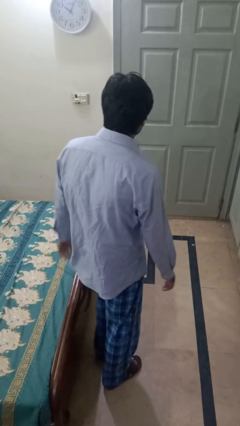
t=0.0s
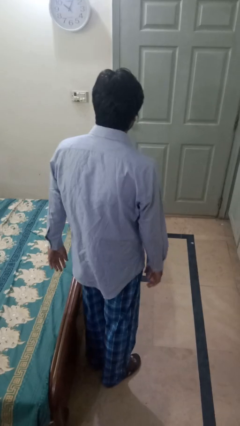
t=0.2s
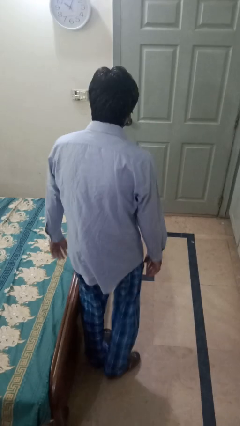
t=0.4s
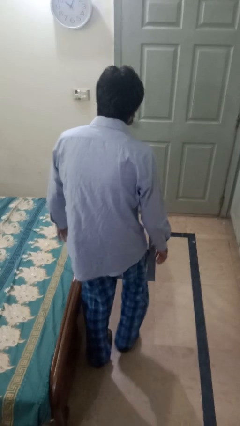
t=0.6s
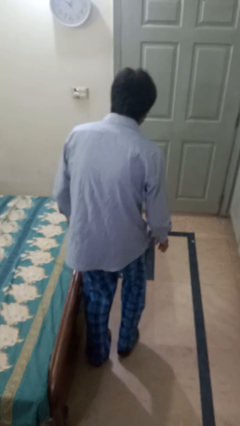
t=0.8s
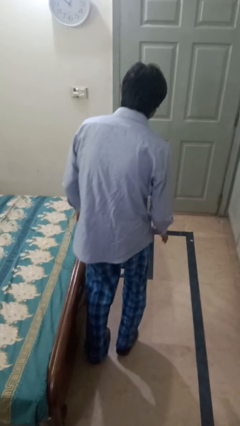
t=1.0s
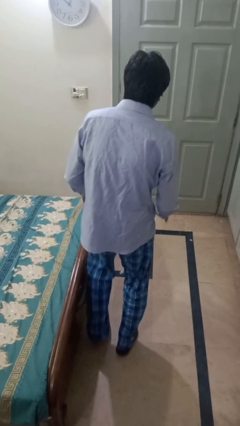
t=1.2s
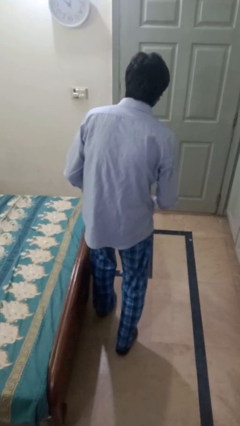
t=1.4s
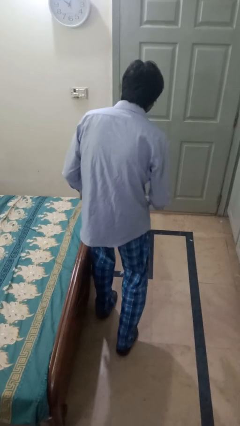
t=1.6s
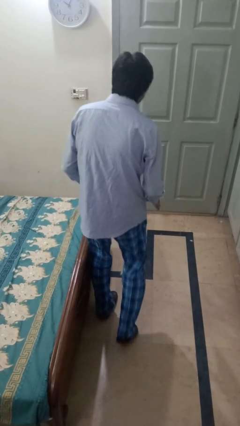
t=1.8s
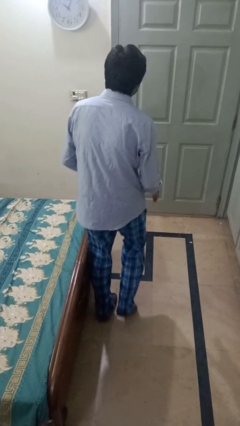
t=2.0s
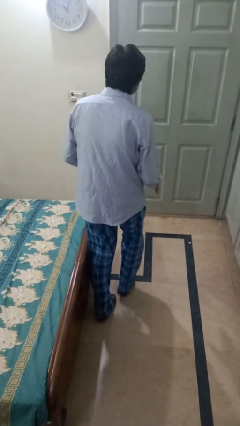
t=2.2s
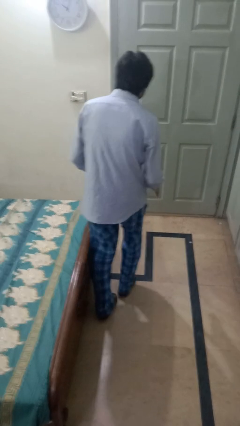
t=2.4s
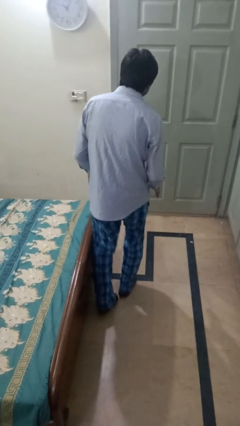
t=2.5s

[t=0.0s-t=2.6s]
person walks tiptoe

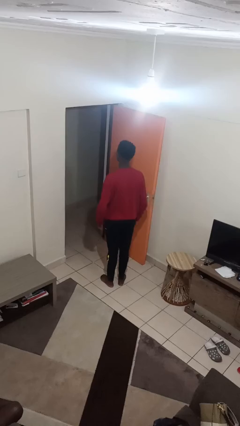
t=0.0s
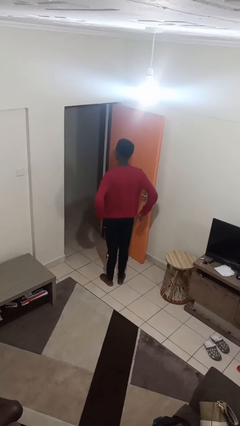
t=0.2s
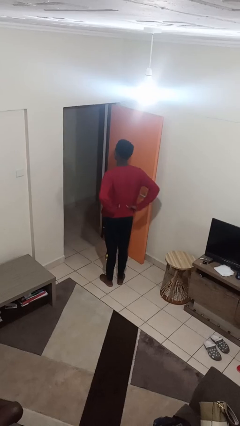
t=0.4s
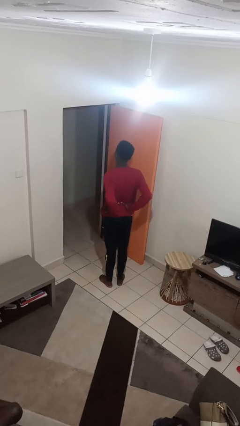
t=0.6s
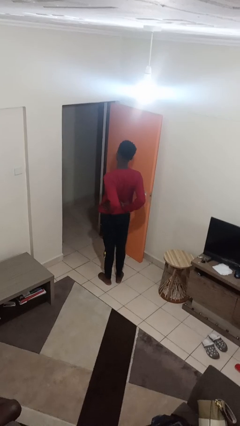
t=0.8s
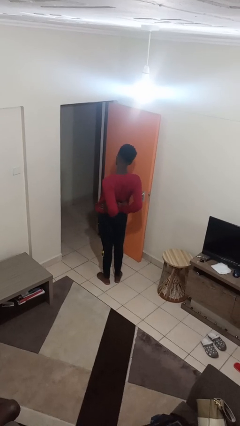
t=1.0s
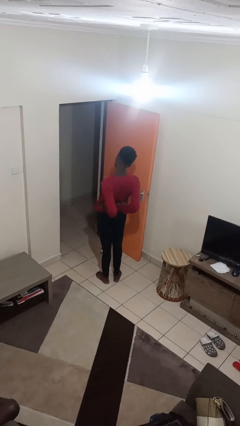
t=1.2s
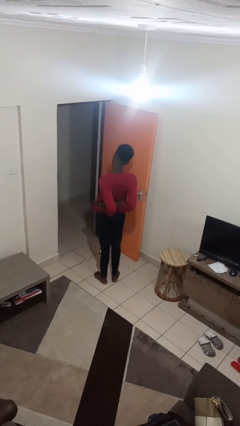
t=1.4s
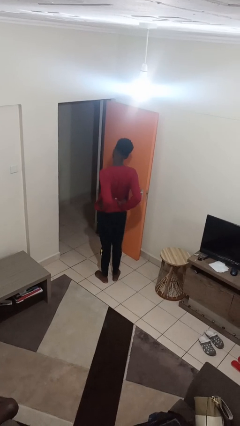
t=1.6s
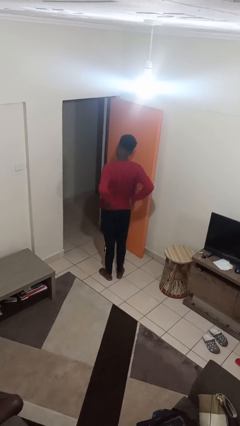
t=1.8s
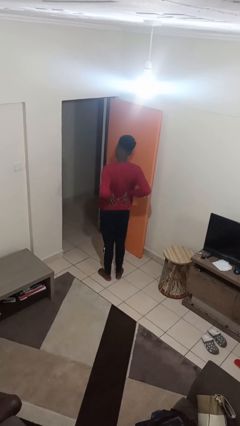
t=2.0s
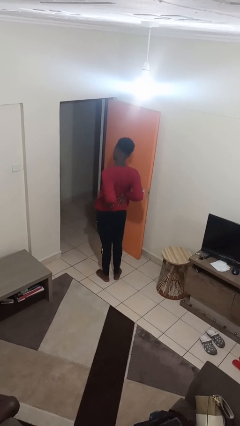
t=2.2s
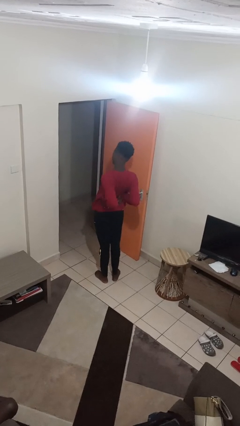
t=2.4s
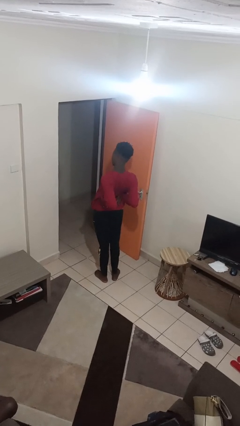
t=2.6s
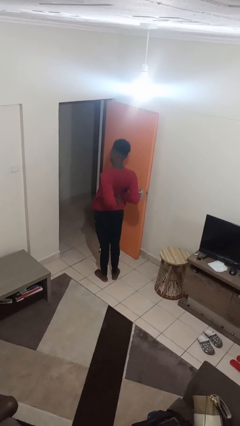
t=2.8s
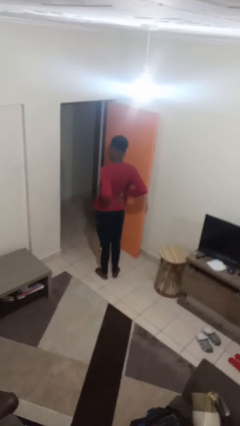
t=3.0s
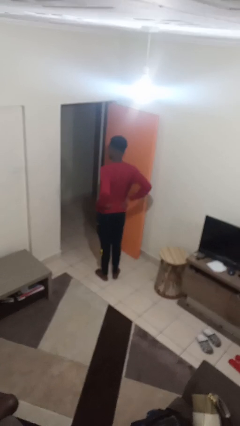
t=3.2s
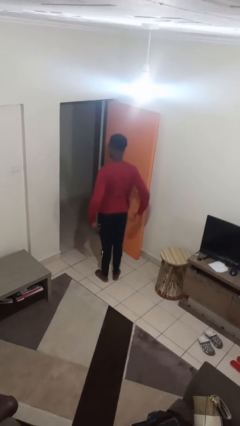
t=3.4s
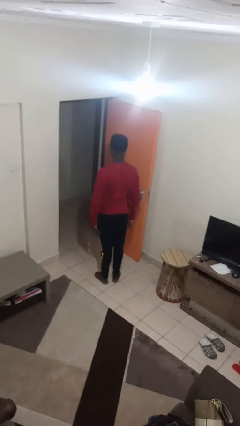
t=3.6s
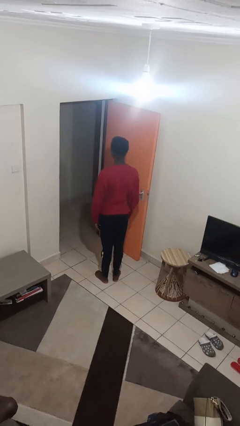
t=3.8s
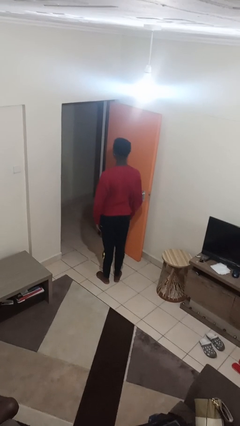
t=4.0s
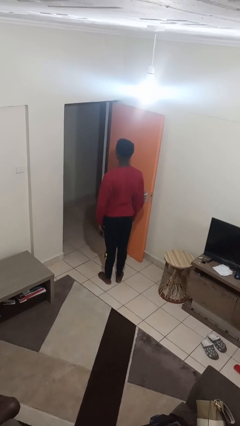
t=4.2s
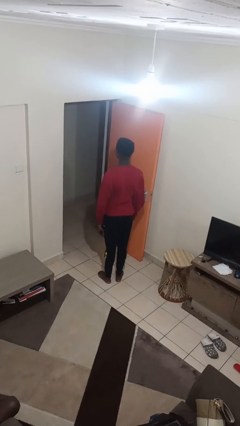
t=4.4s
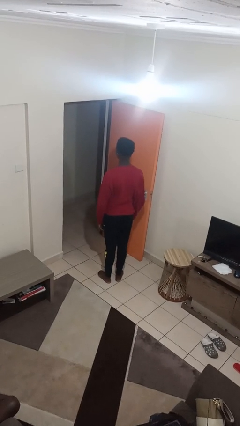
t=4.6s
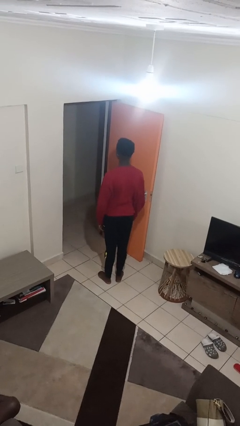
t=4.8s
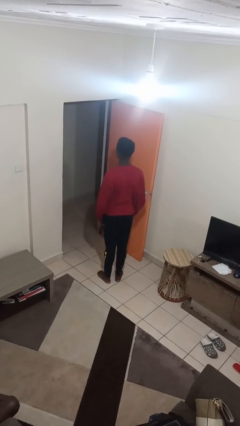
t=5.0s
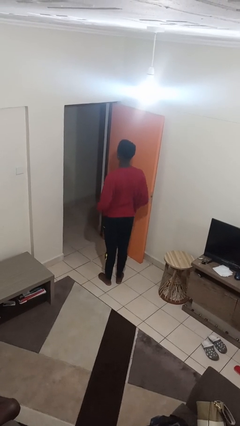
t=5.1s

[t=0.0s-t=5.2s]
person stretches back

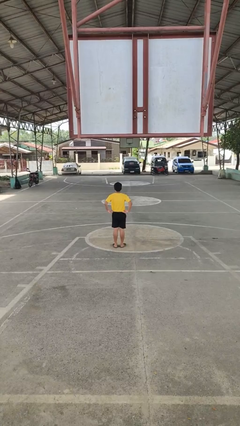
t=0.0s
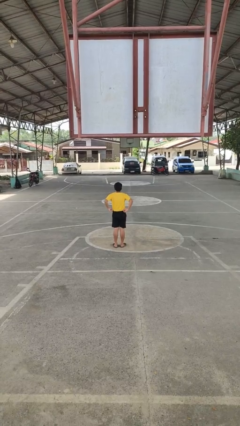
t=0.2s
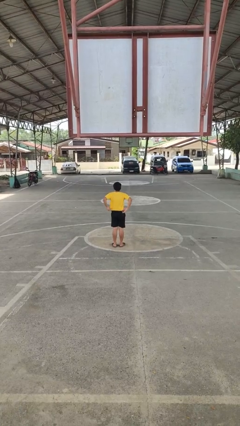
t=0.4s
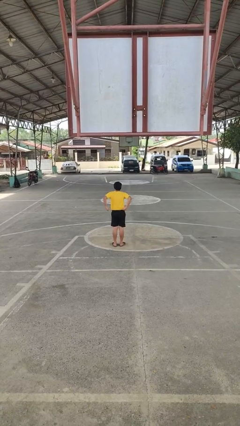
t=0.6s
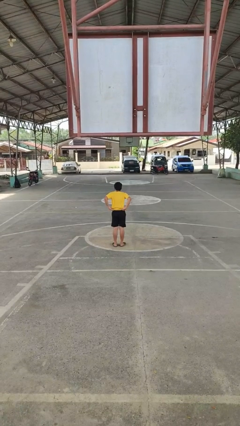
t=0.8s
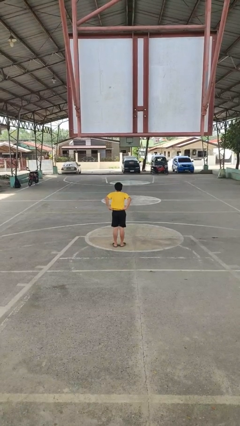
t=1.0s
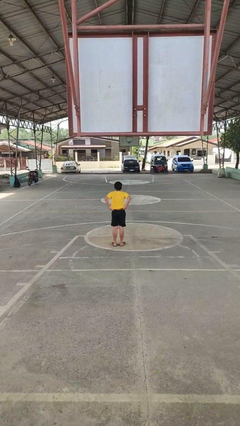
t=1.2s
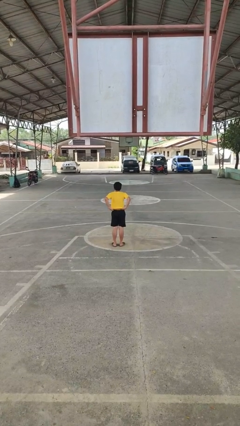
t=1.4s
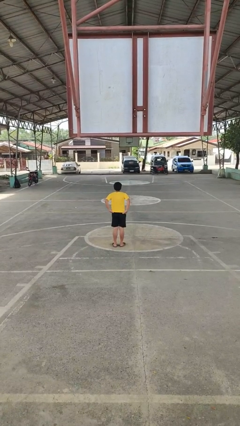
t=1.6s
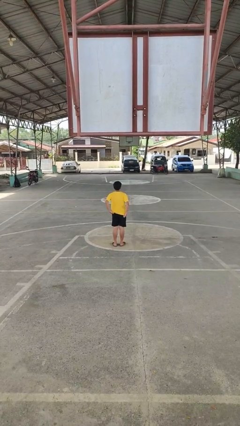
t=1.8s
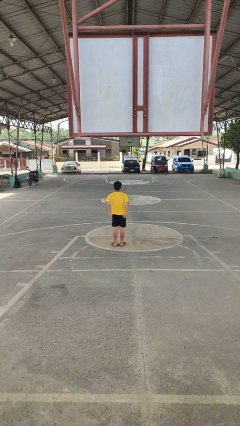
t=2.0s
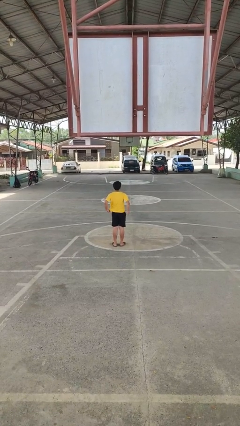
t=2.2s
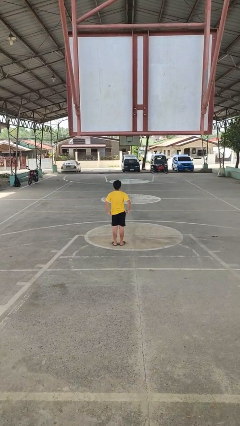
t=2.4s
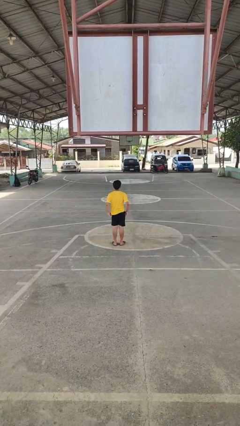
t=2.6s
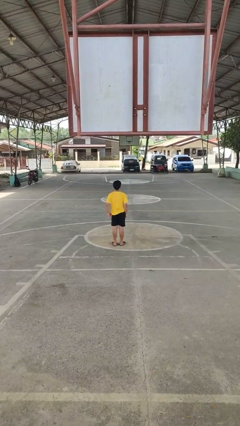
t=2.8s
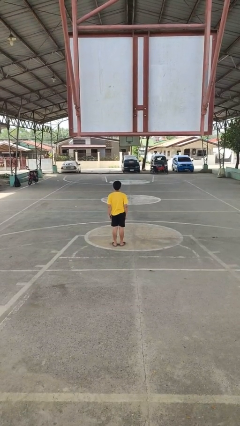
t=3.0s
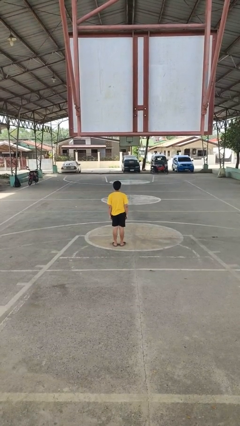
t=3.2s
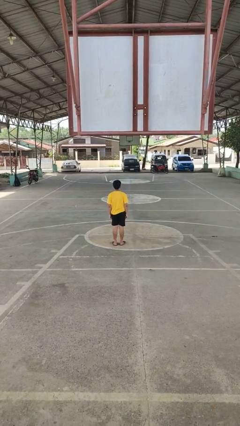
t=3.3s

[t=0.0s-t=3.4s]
person untucks shirt

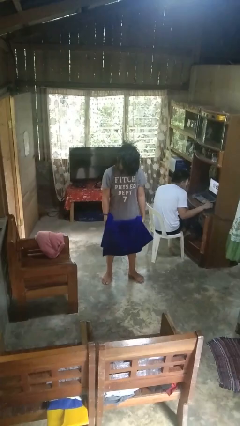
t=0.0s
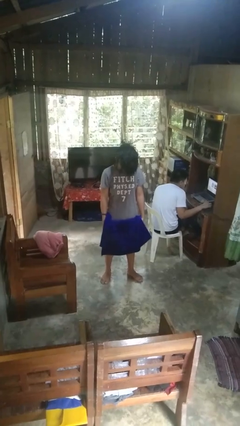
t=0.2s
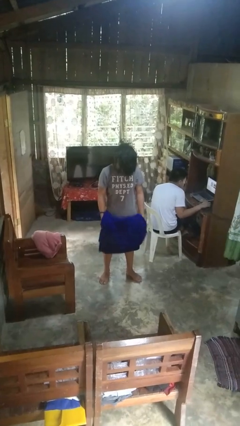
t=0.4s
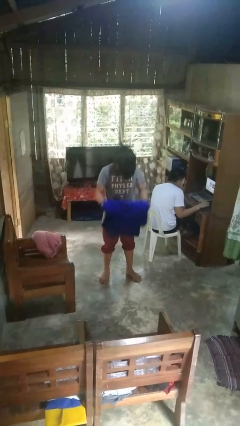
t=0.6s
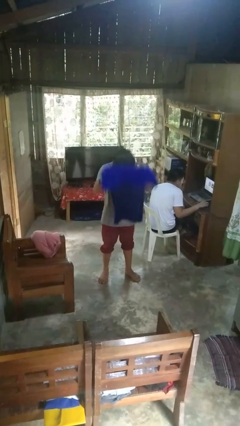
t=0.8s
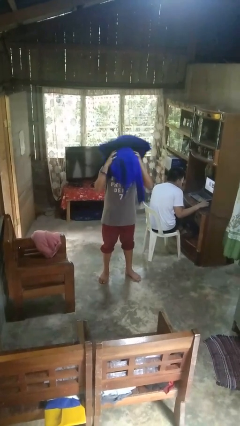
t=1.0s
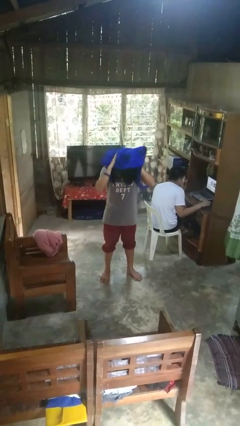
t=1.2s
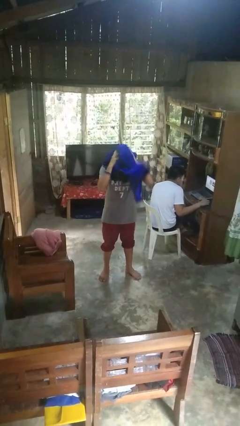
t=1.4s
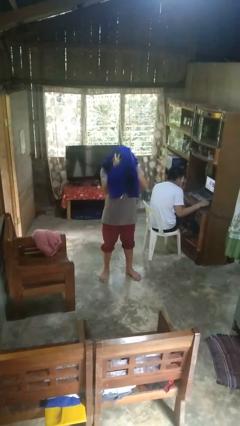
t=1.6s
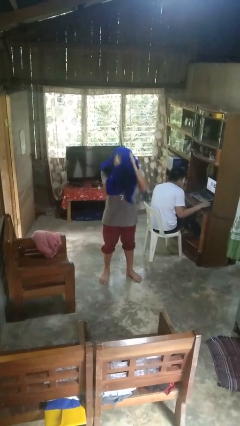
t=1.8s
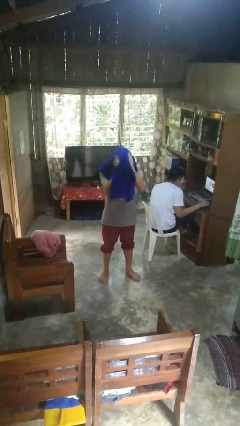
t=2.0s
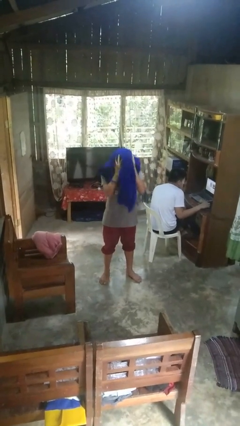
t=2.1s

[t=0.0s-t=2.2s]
person dries hair with towel

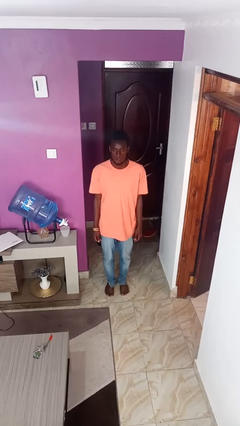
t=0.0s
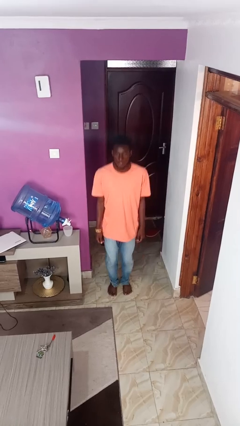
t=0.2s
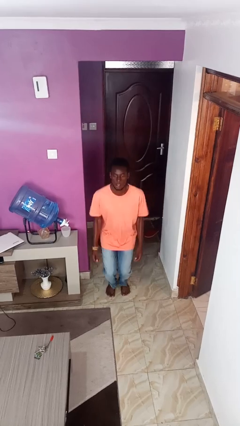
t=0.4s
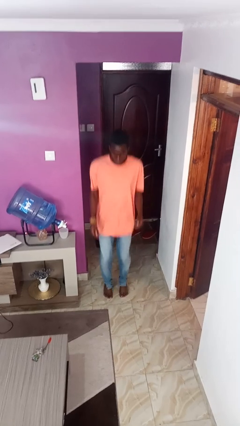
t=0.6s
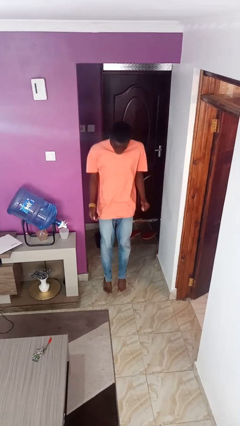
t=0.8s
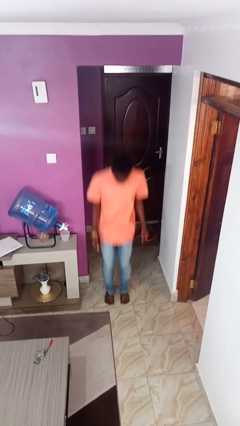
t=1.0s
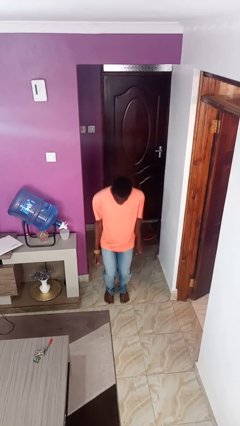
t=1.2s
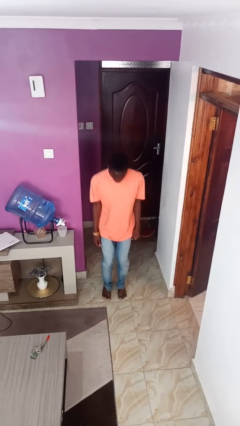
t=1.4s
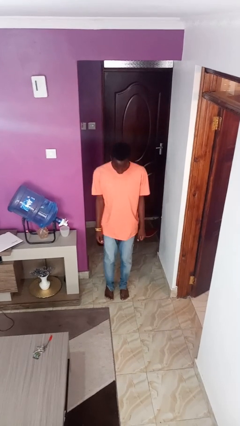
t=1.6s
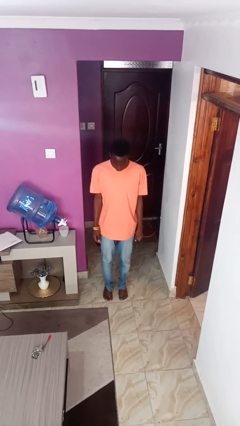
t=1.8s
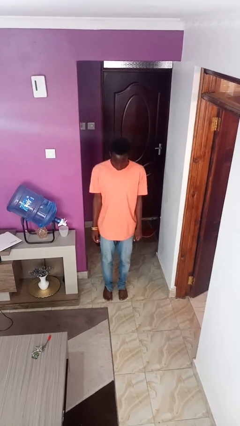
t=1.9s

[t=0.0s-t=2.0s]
person jumps

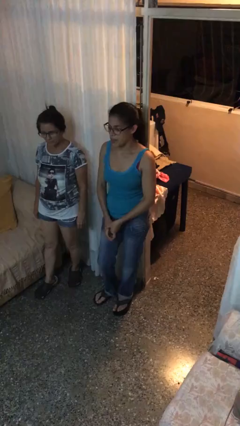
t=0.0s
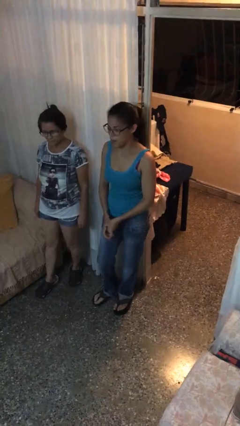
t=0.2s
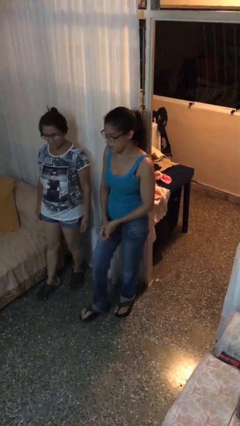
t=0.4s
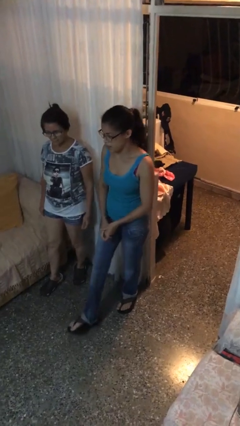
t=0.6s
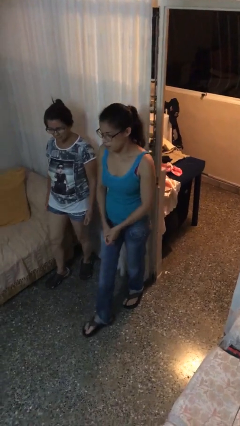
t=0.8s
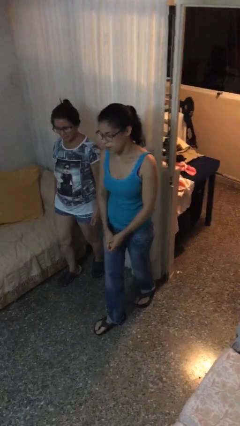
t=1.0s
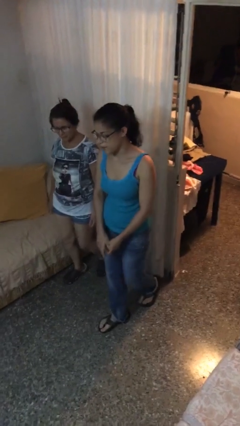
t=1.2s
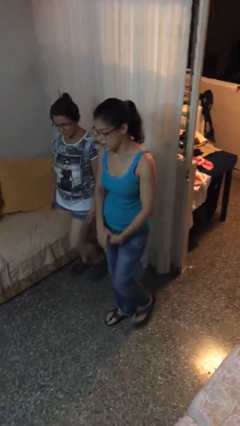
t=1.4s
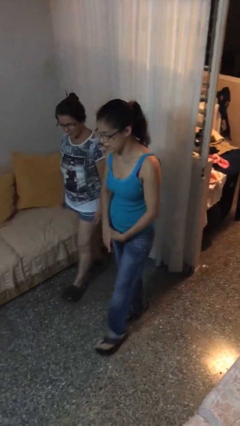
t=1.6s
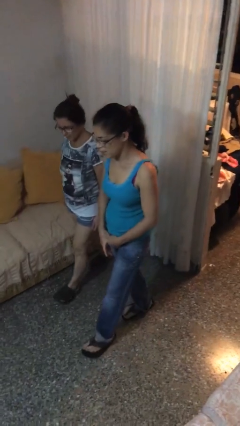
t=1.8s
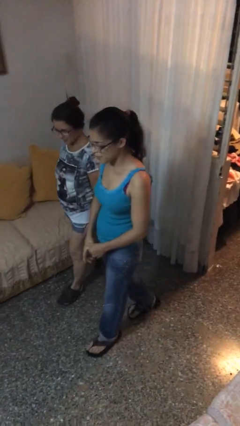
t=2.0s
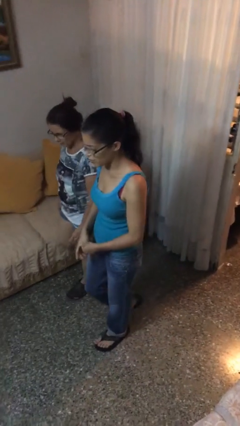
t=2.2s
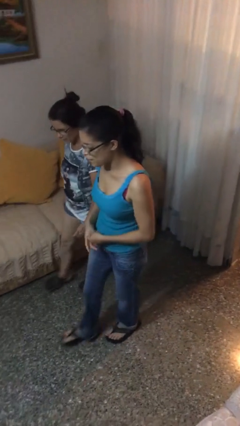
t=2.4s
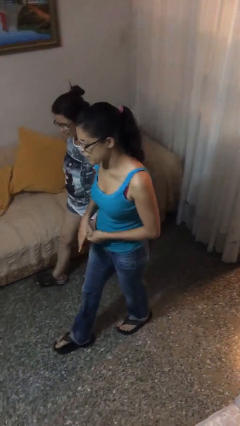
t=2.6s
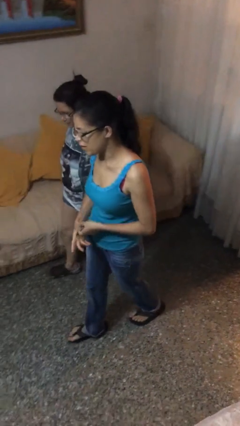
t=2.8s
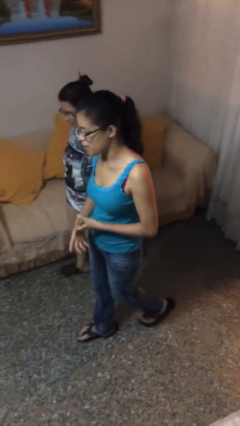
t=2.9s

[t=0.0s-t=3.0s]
person talks to person
